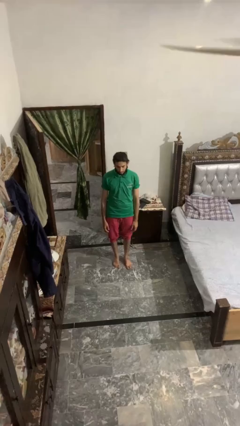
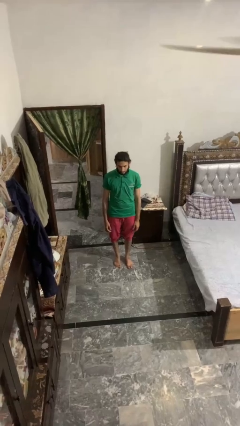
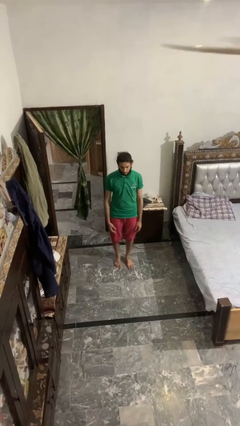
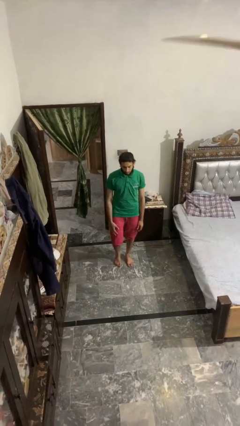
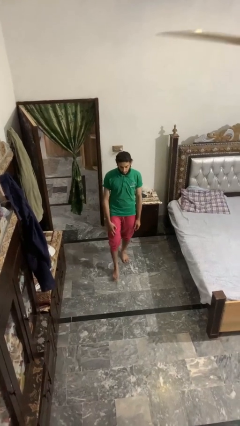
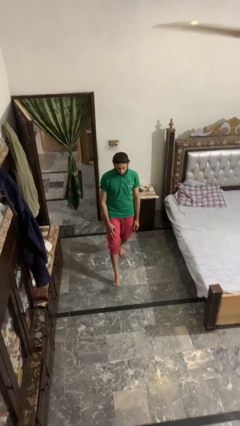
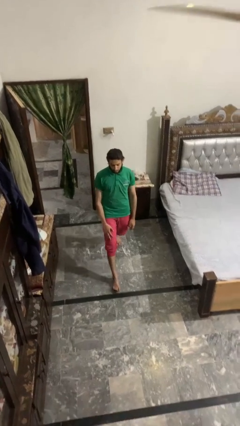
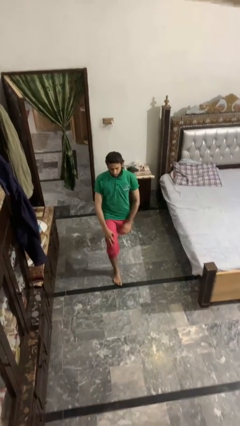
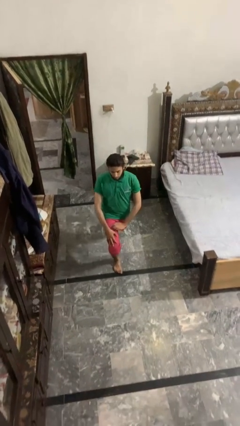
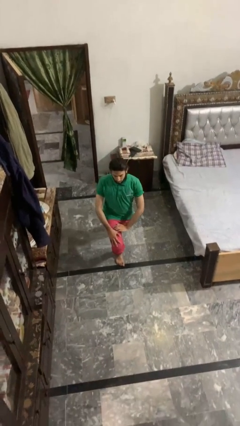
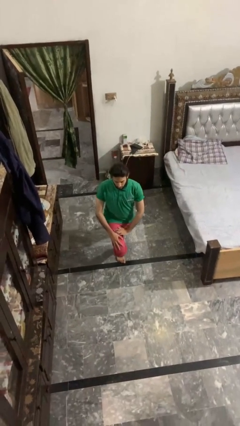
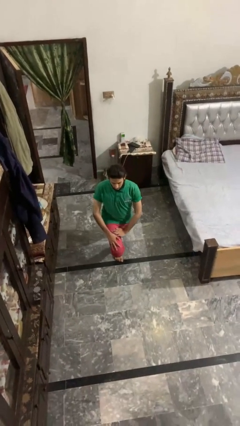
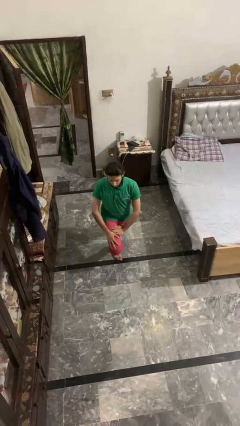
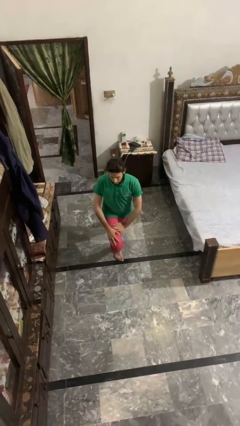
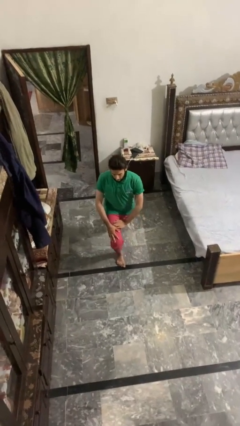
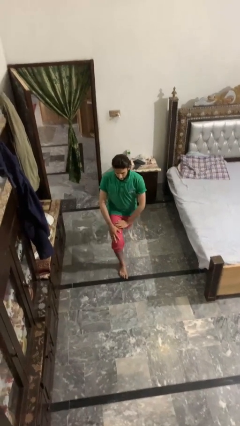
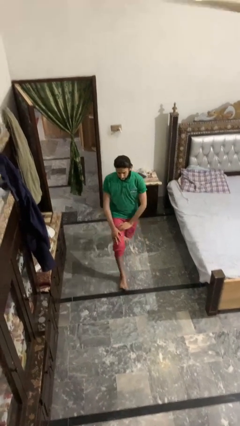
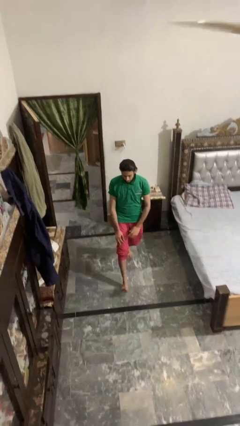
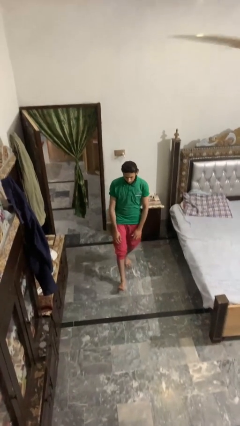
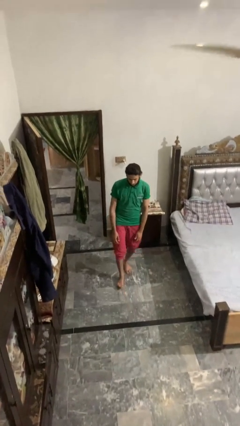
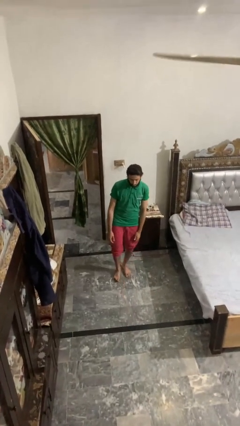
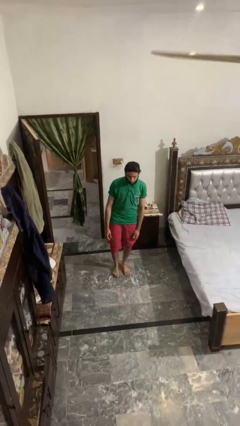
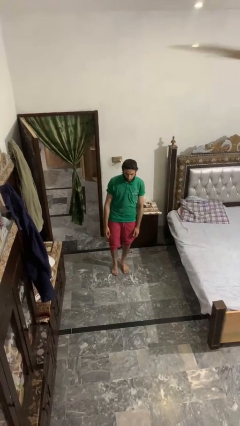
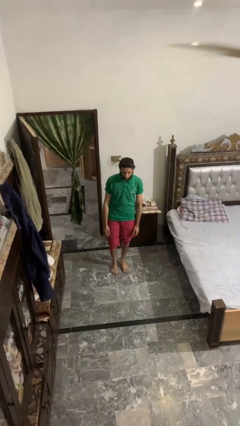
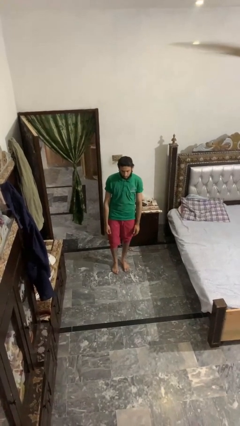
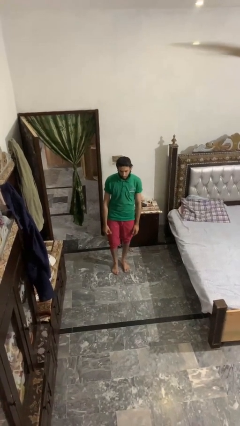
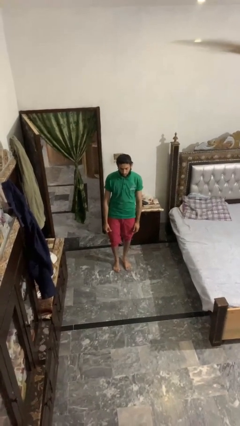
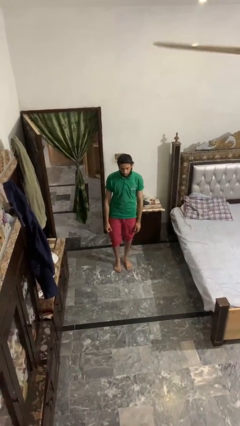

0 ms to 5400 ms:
person exercises with lunges

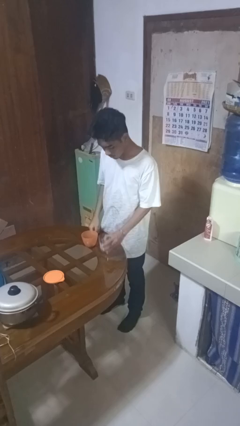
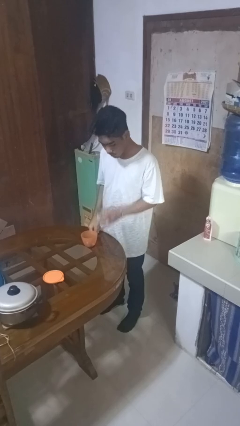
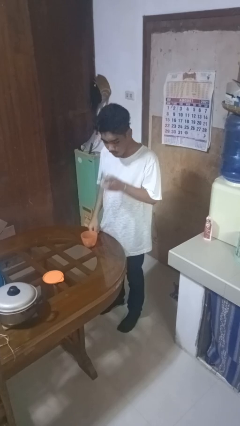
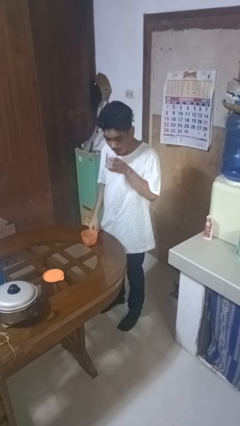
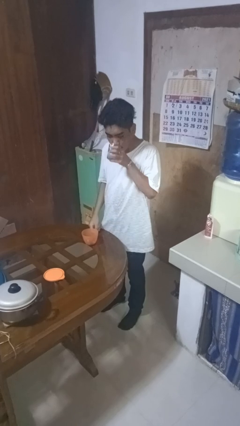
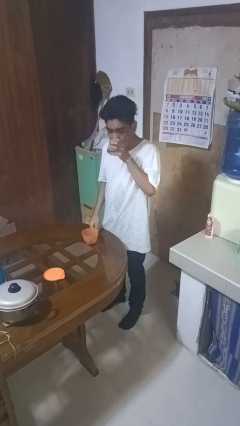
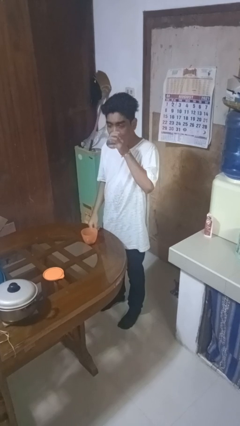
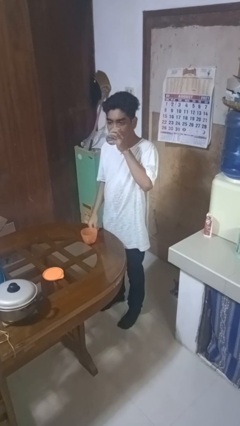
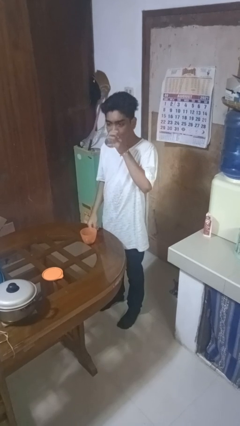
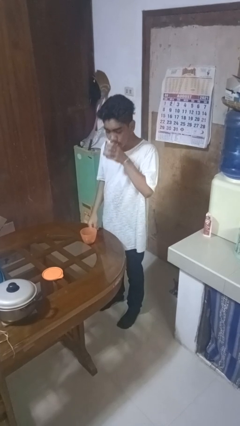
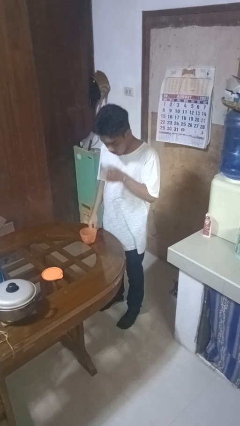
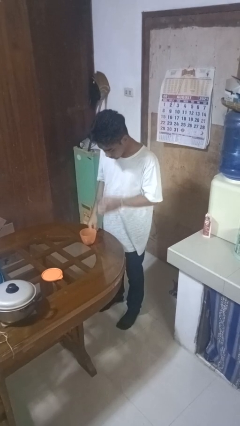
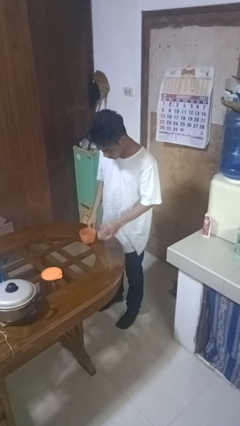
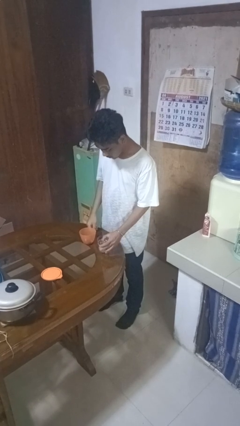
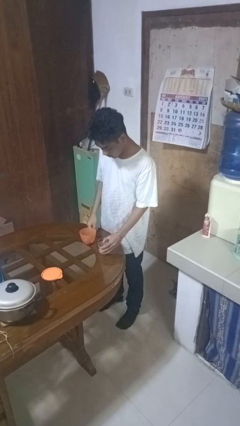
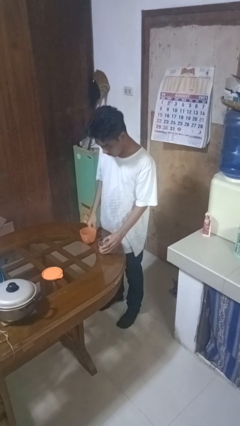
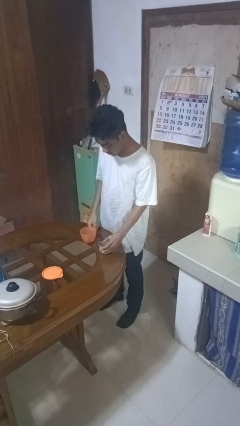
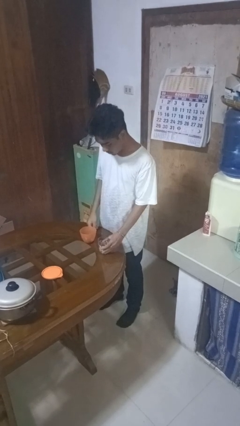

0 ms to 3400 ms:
person drinks from cup

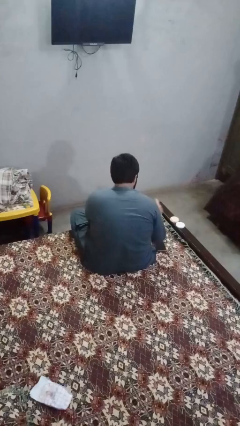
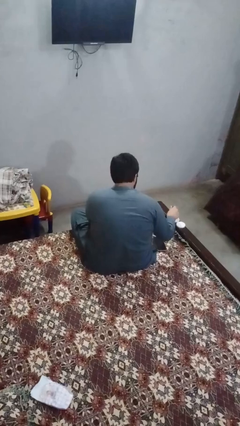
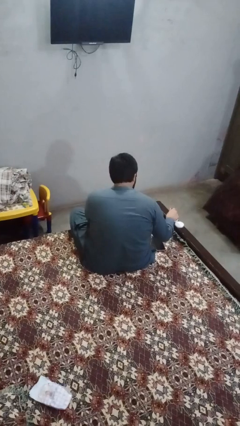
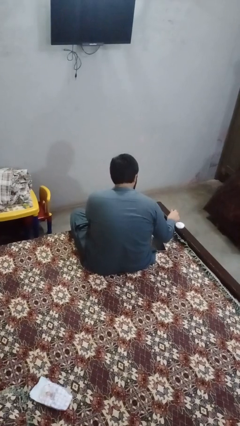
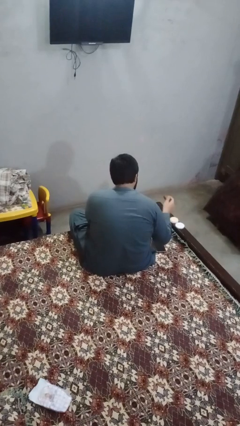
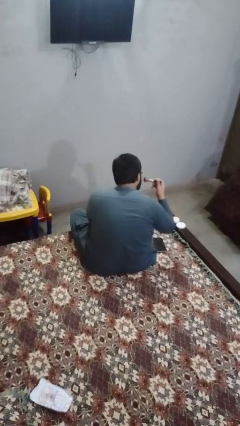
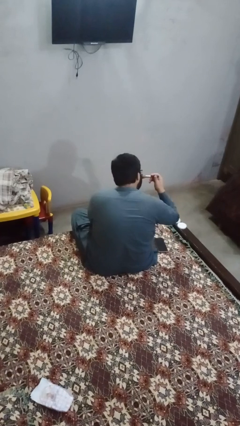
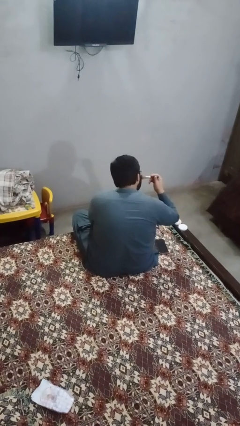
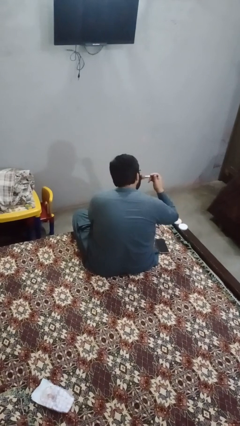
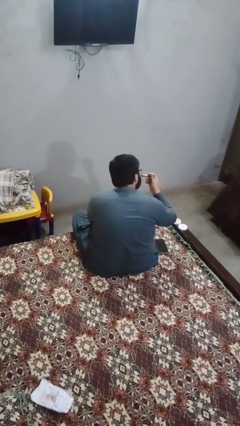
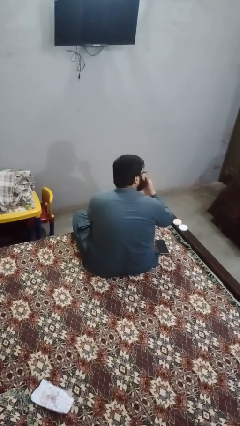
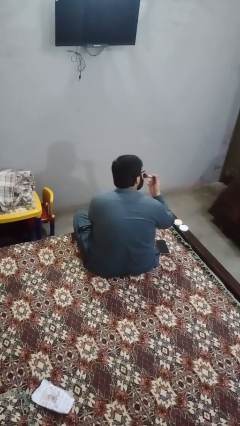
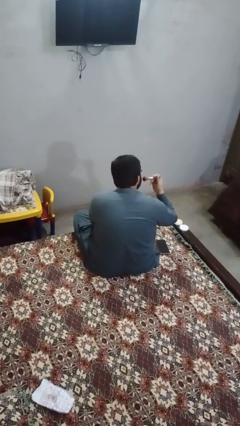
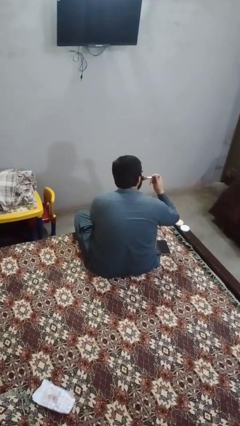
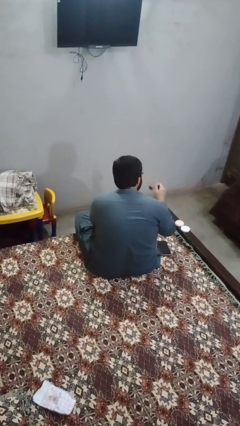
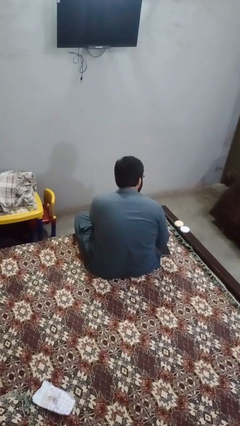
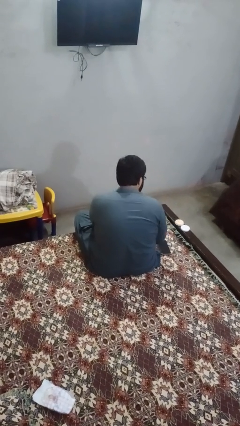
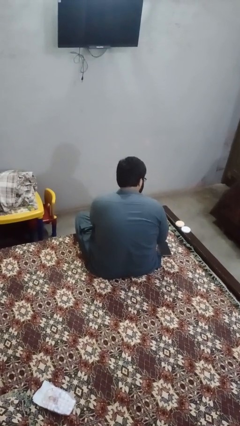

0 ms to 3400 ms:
person applies foundation makeup

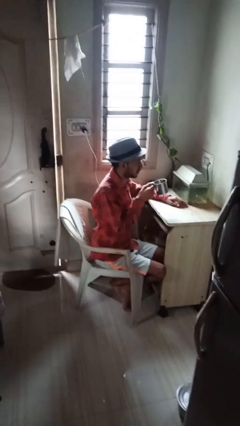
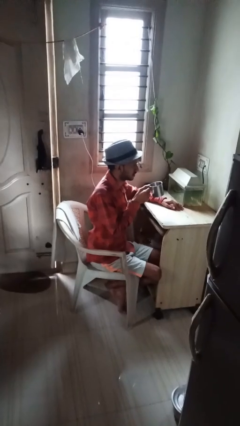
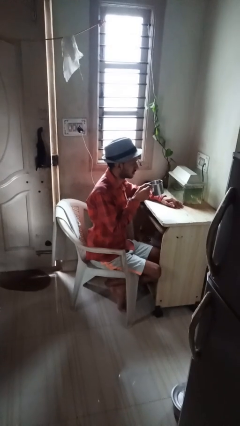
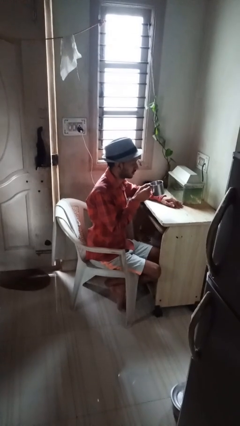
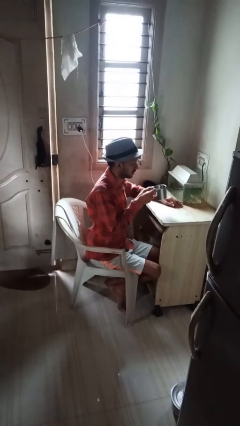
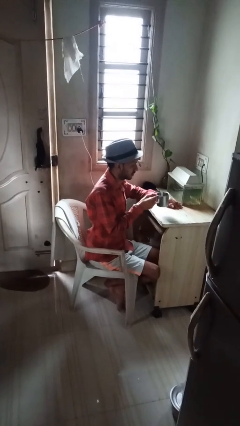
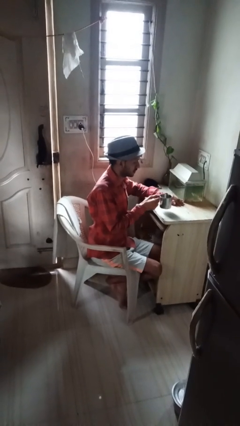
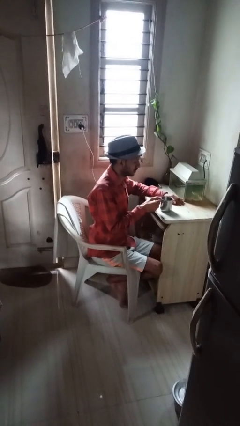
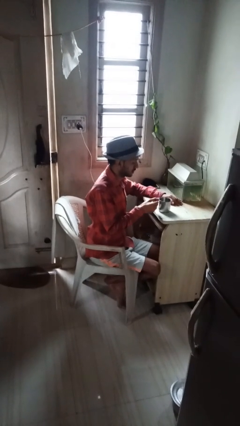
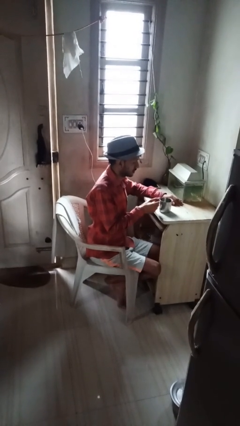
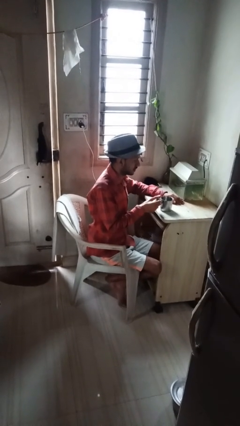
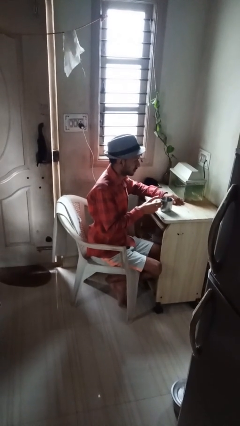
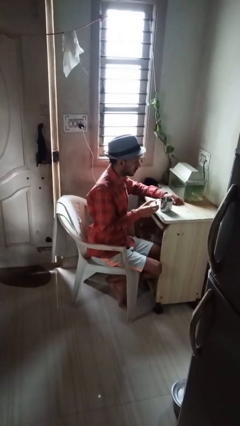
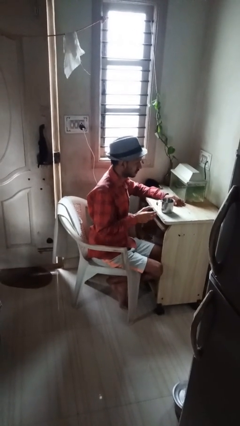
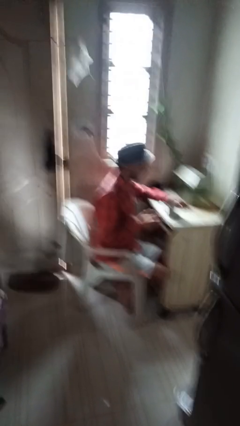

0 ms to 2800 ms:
person puts down object on table

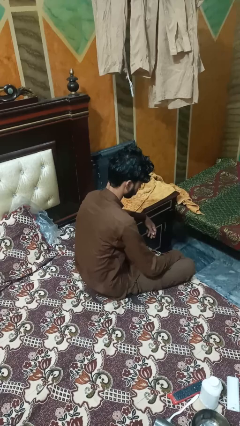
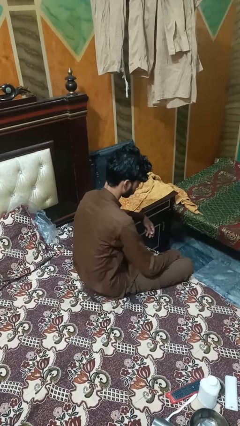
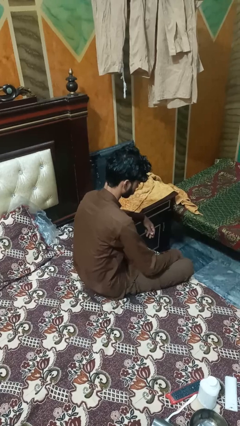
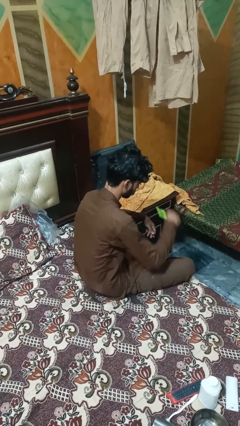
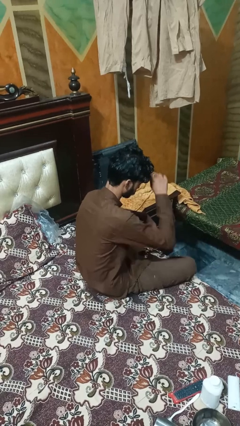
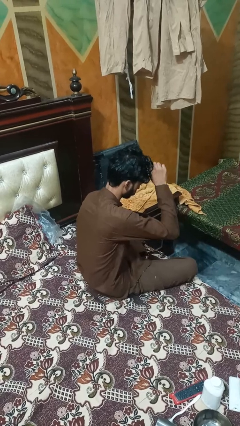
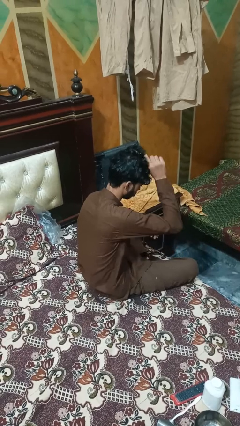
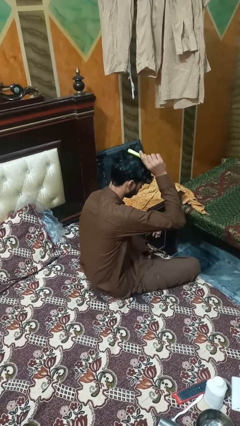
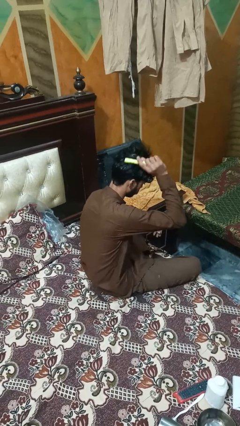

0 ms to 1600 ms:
person brushes hair

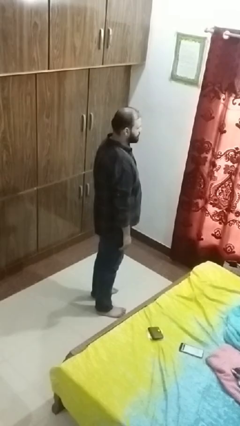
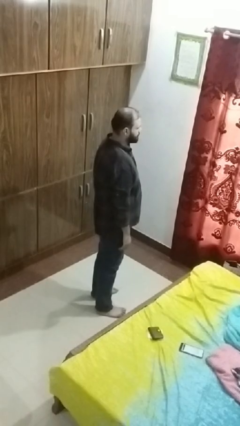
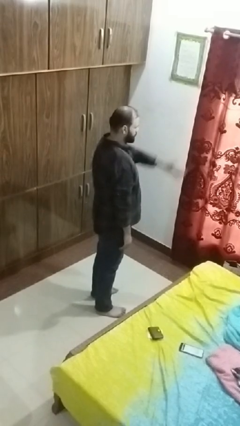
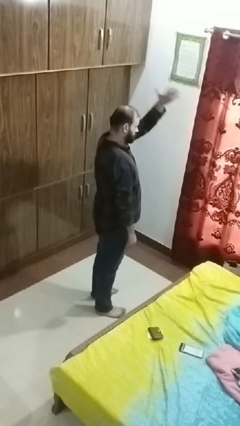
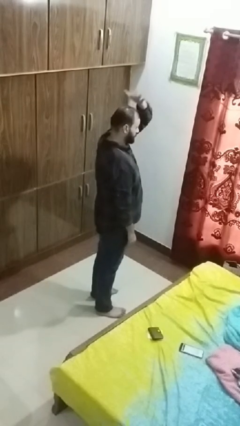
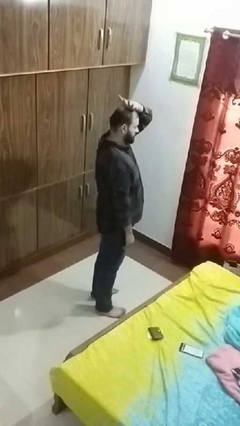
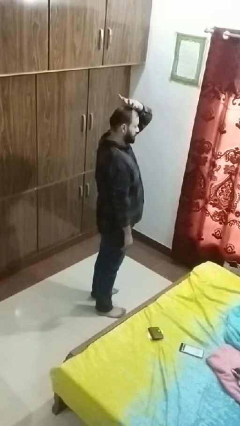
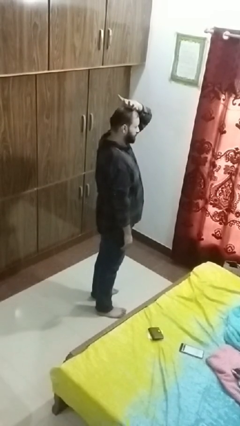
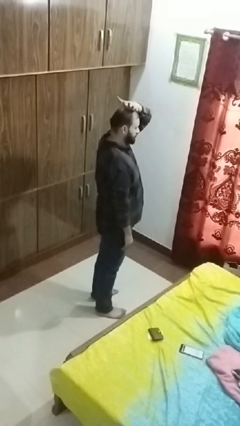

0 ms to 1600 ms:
person pats head
